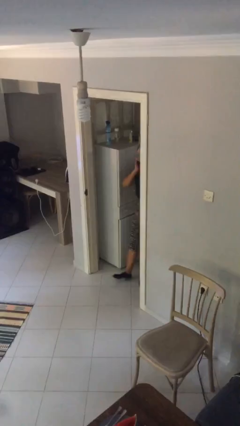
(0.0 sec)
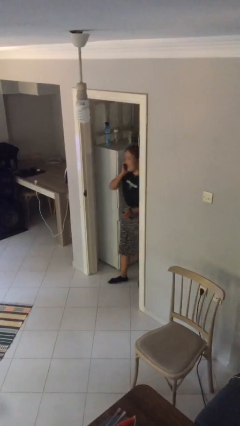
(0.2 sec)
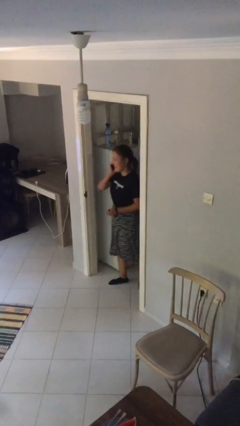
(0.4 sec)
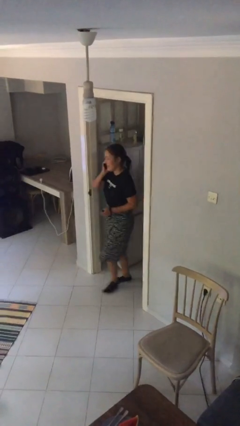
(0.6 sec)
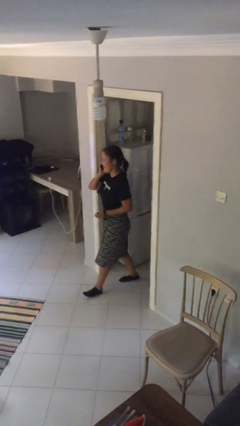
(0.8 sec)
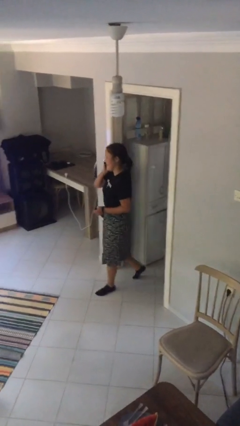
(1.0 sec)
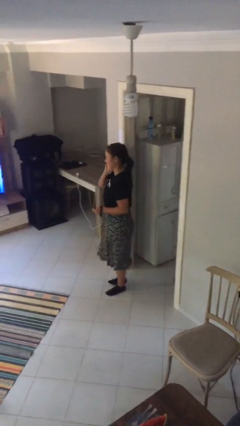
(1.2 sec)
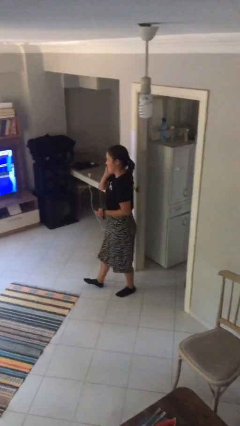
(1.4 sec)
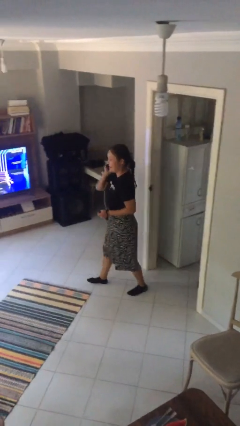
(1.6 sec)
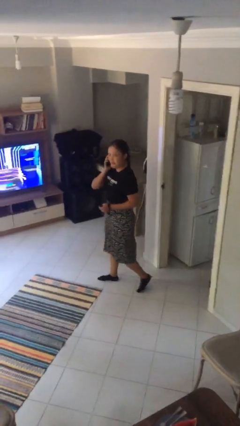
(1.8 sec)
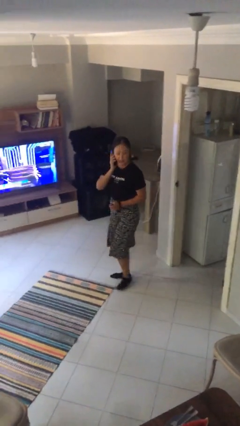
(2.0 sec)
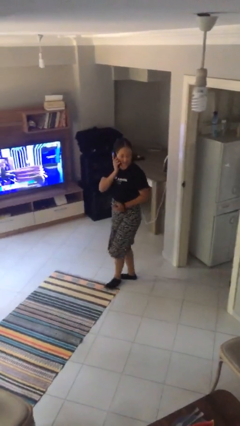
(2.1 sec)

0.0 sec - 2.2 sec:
person enters scene through structure

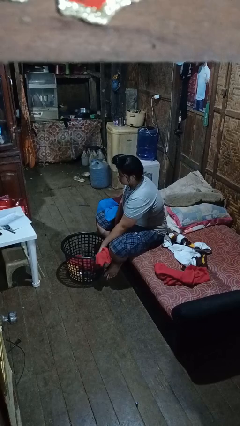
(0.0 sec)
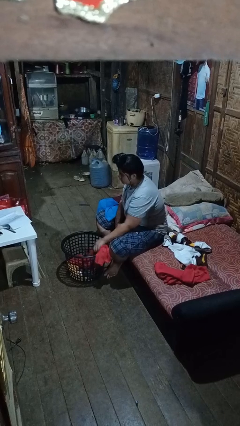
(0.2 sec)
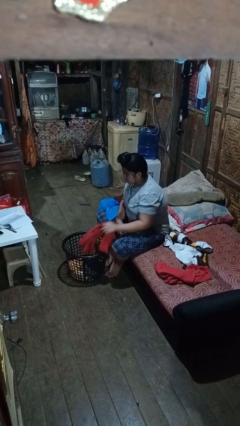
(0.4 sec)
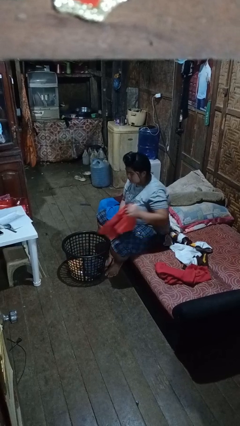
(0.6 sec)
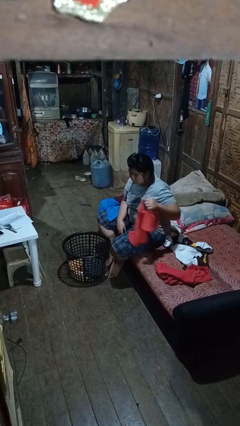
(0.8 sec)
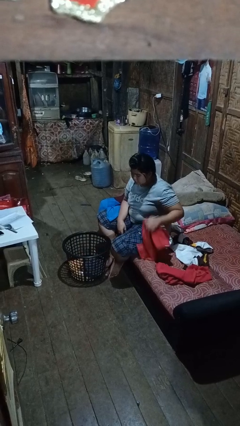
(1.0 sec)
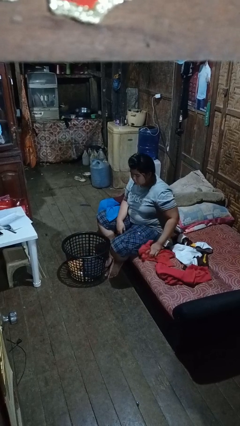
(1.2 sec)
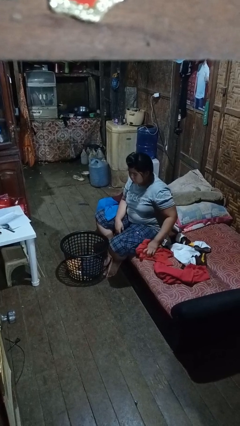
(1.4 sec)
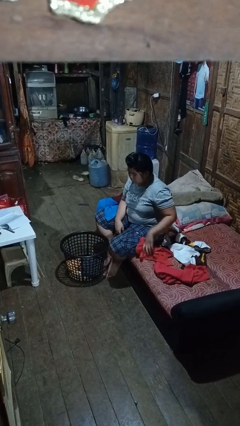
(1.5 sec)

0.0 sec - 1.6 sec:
person takes object from basket

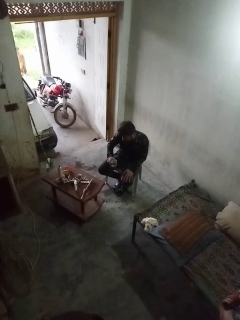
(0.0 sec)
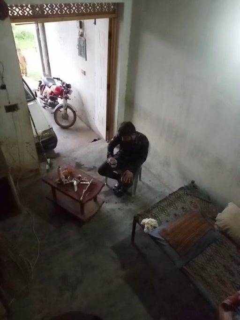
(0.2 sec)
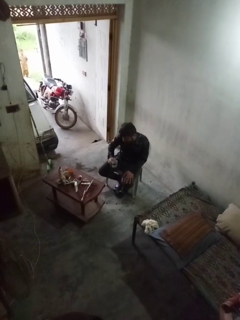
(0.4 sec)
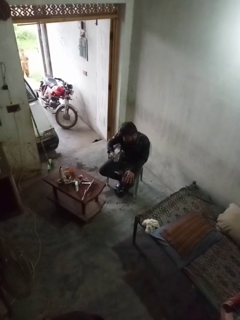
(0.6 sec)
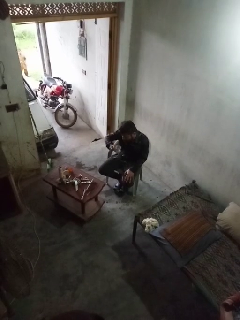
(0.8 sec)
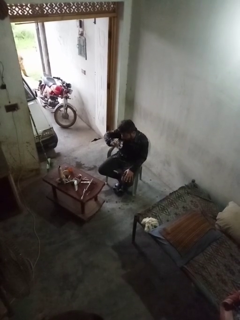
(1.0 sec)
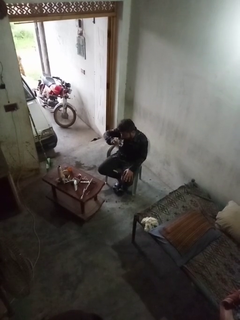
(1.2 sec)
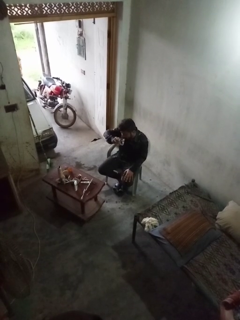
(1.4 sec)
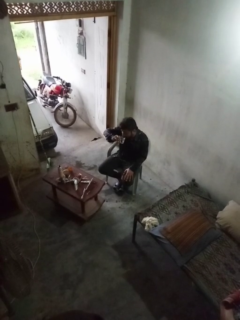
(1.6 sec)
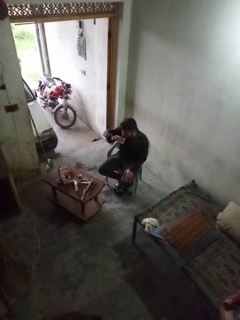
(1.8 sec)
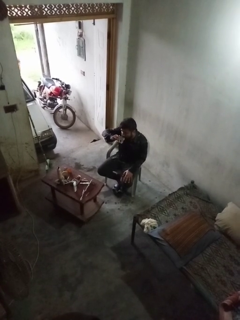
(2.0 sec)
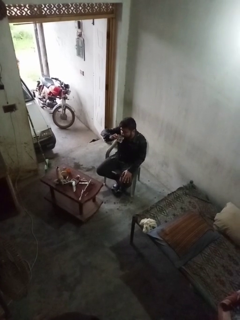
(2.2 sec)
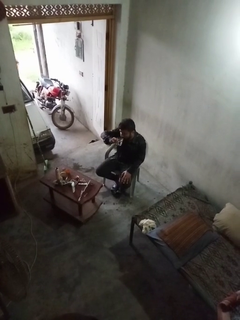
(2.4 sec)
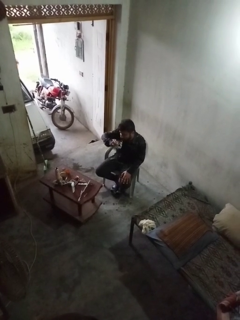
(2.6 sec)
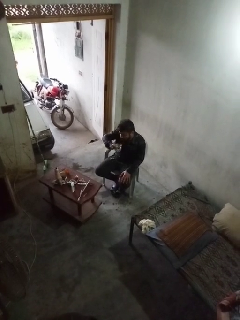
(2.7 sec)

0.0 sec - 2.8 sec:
person drinks from shotglass

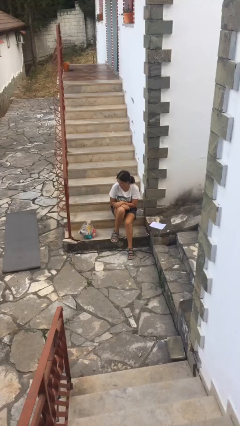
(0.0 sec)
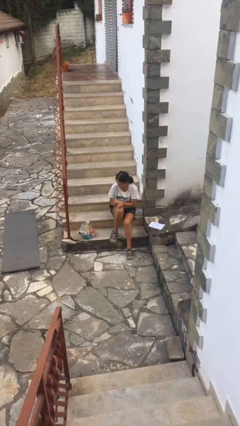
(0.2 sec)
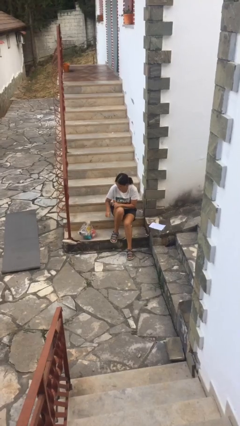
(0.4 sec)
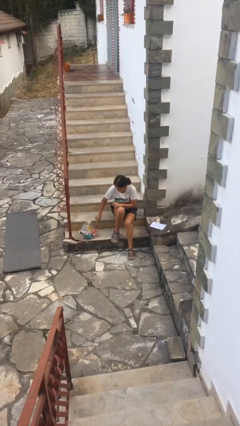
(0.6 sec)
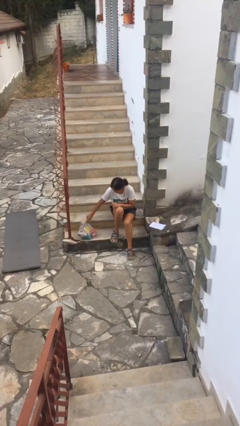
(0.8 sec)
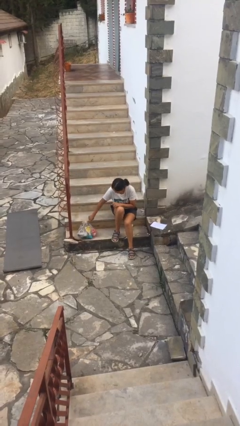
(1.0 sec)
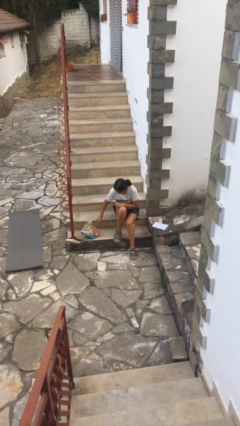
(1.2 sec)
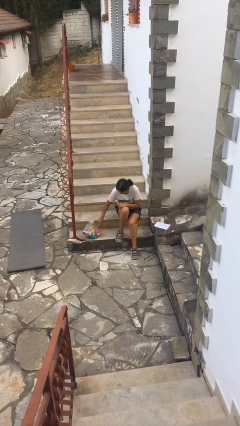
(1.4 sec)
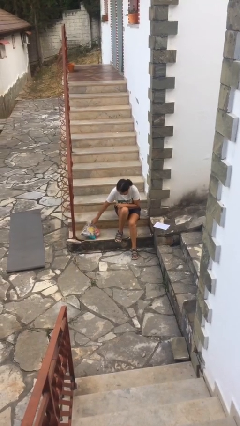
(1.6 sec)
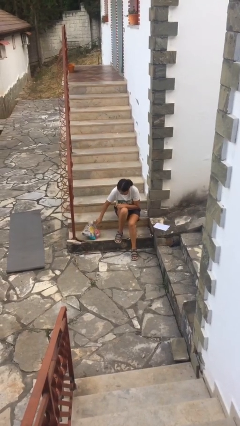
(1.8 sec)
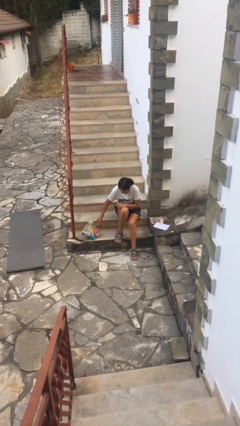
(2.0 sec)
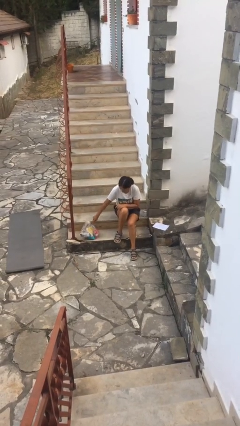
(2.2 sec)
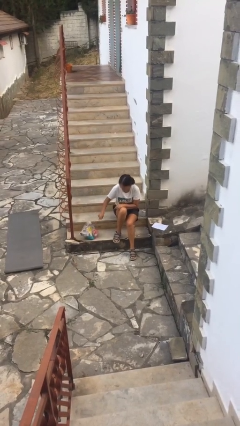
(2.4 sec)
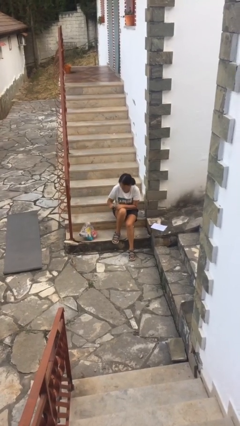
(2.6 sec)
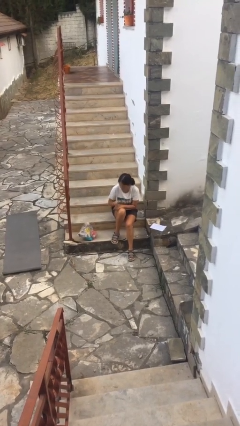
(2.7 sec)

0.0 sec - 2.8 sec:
person taps object with finger

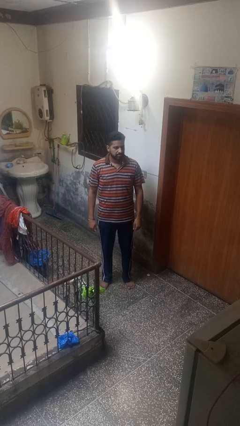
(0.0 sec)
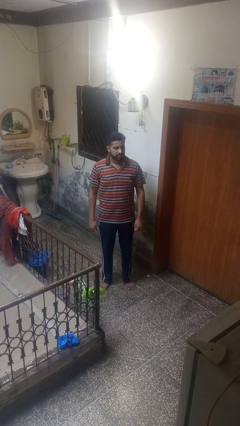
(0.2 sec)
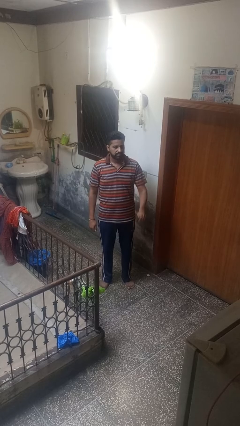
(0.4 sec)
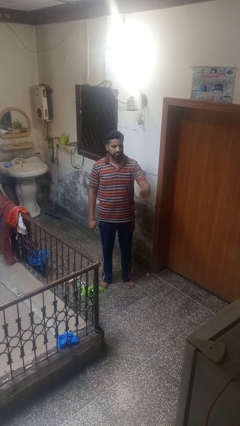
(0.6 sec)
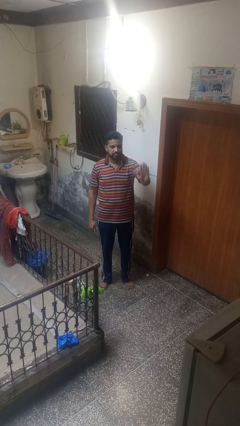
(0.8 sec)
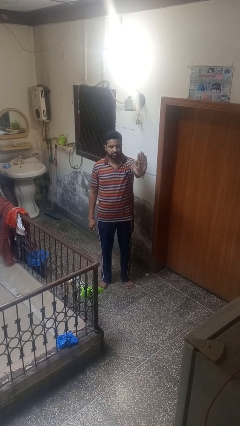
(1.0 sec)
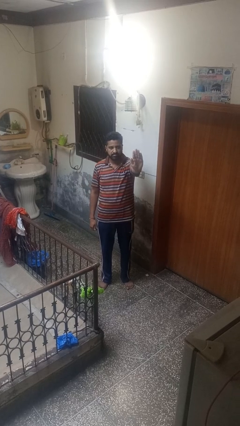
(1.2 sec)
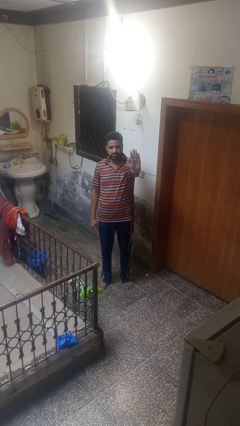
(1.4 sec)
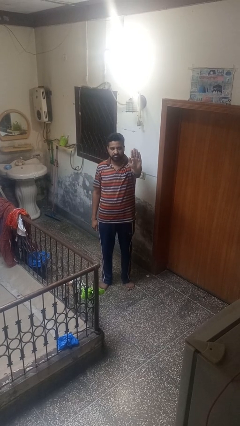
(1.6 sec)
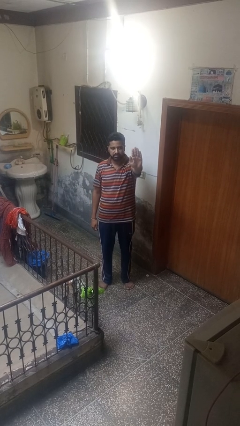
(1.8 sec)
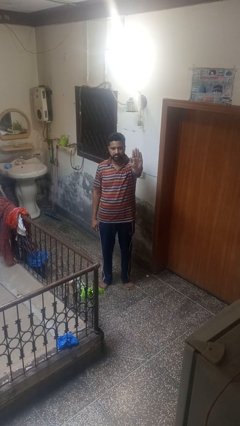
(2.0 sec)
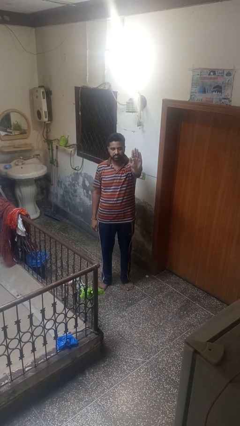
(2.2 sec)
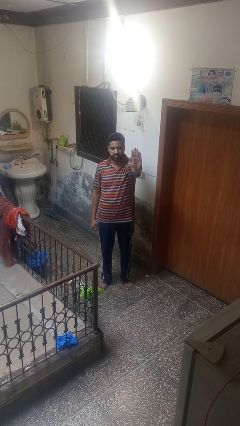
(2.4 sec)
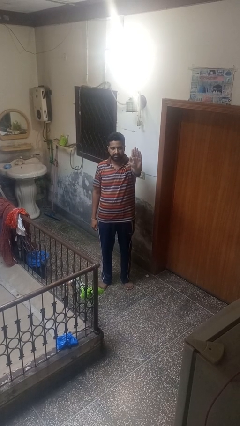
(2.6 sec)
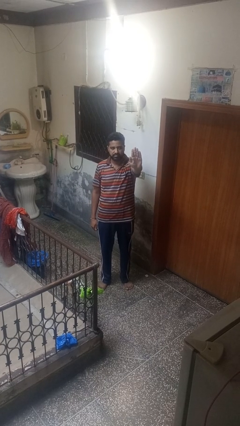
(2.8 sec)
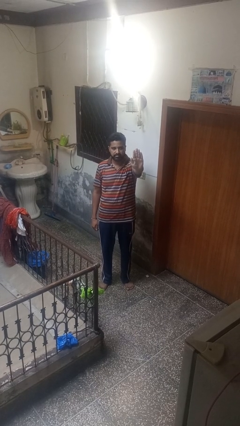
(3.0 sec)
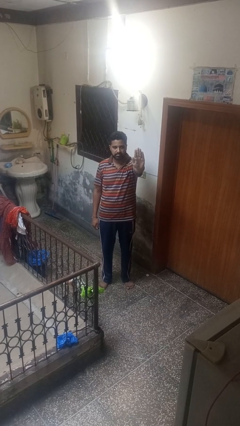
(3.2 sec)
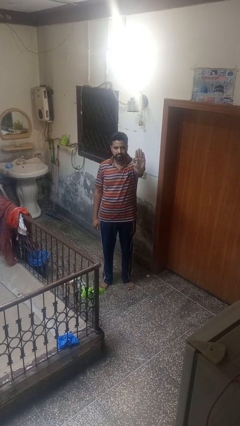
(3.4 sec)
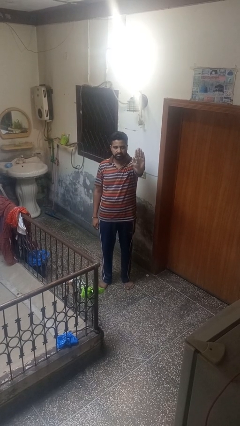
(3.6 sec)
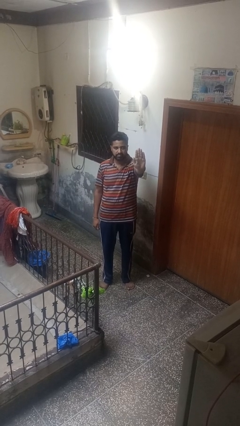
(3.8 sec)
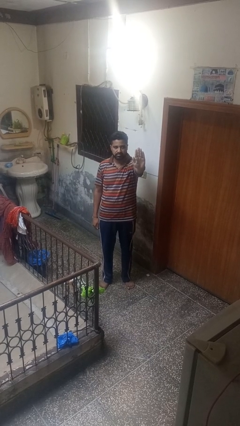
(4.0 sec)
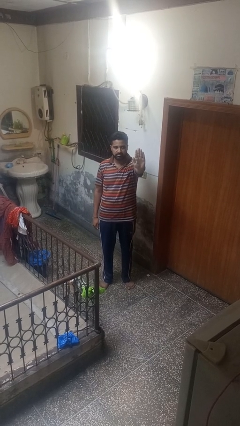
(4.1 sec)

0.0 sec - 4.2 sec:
person gestures stop

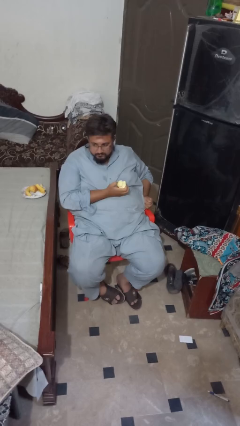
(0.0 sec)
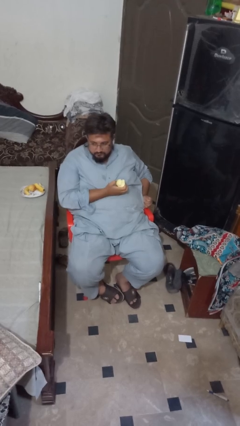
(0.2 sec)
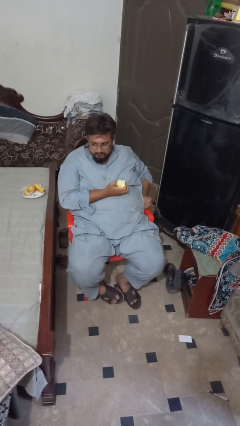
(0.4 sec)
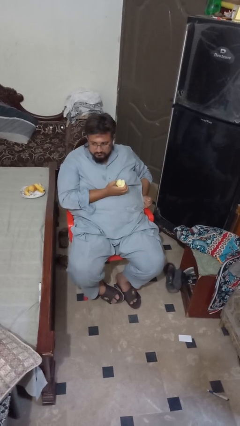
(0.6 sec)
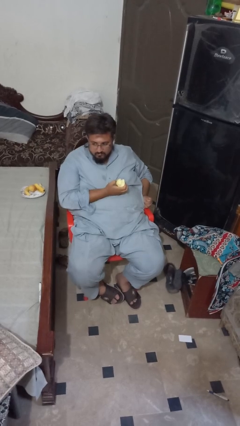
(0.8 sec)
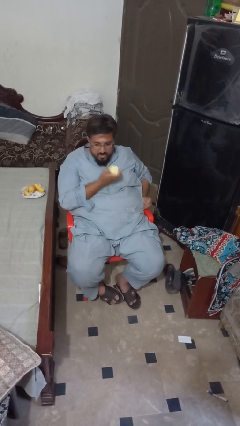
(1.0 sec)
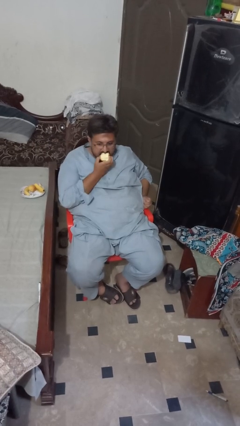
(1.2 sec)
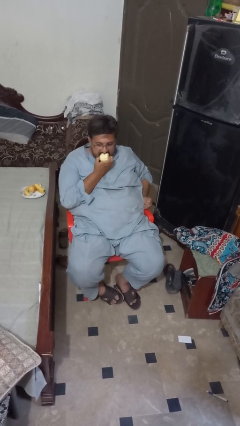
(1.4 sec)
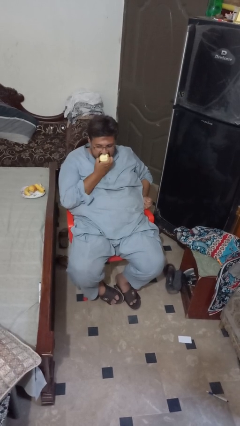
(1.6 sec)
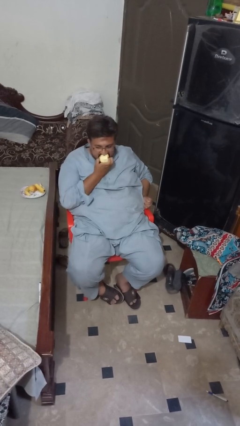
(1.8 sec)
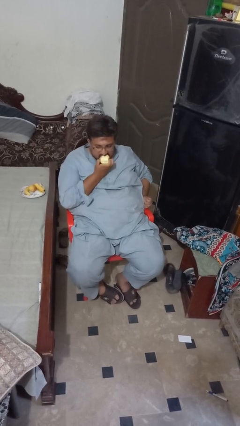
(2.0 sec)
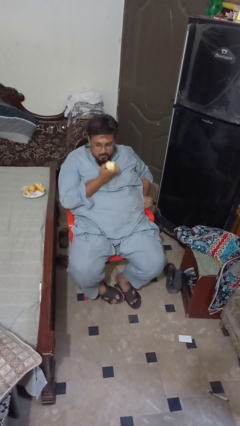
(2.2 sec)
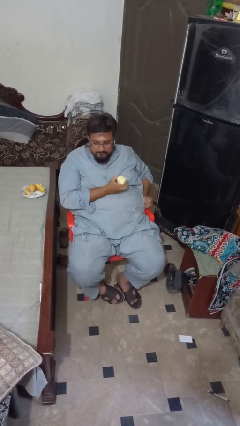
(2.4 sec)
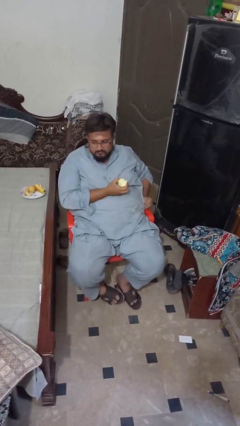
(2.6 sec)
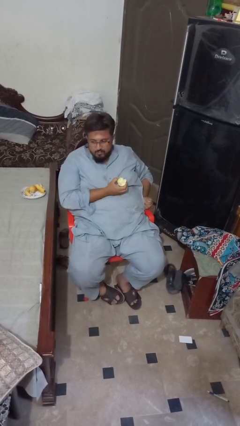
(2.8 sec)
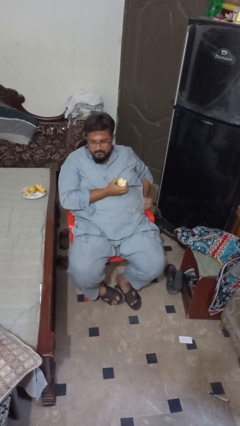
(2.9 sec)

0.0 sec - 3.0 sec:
person eats apple

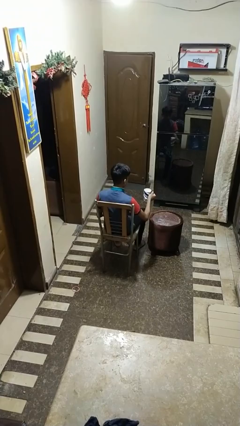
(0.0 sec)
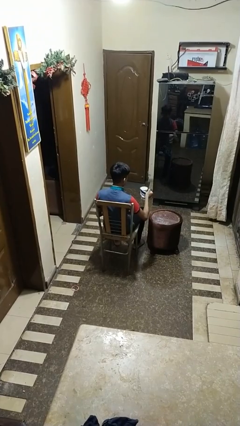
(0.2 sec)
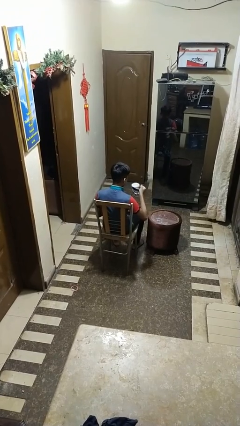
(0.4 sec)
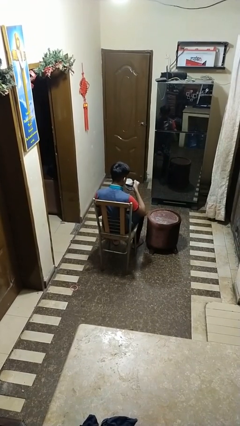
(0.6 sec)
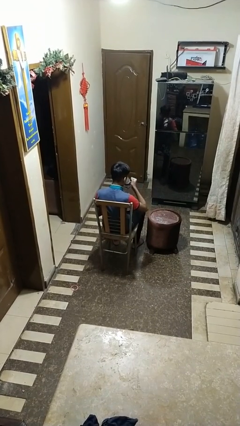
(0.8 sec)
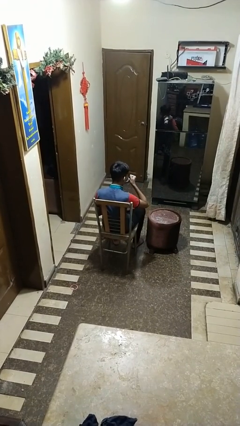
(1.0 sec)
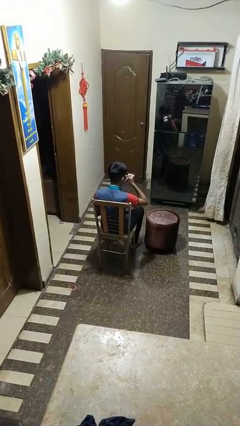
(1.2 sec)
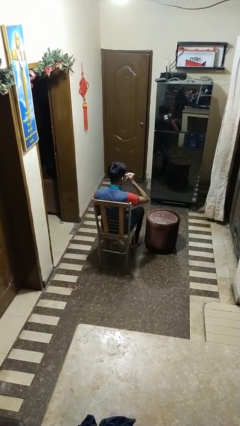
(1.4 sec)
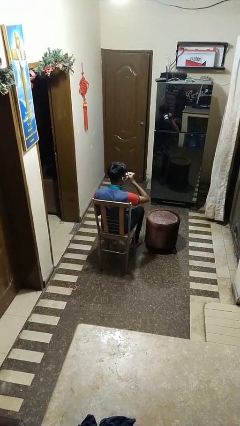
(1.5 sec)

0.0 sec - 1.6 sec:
person drinks from mug
